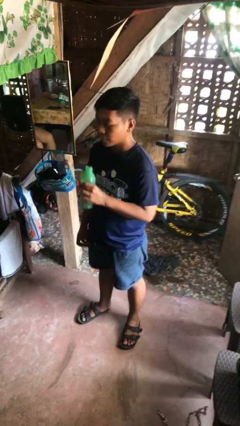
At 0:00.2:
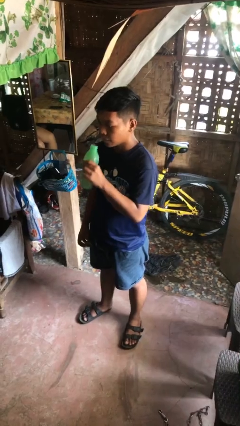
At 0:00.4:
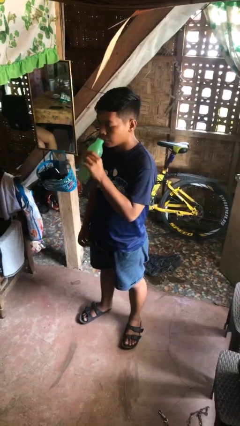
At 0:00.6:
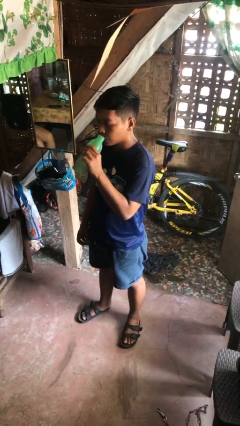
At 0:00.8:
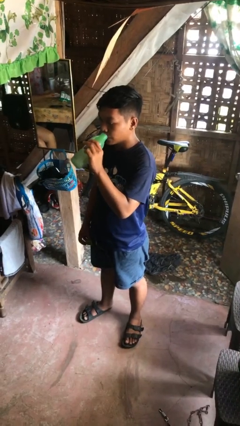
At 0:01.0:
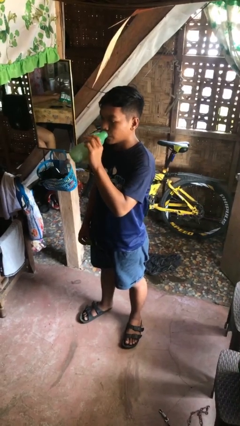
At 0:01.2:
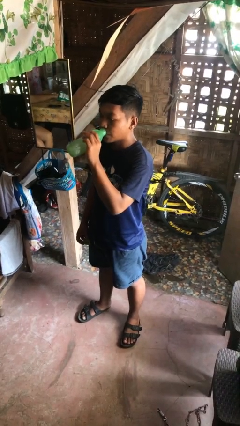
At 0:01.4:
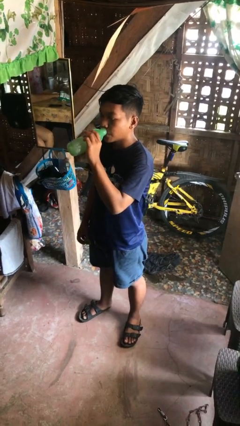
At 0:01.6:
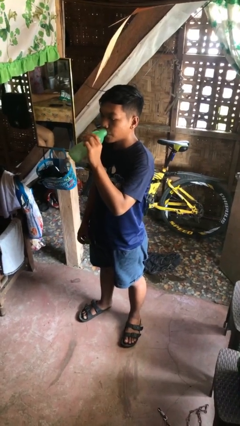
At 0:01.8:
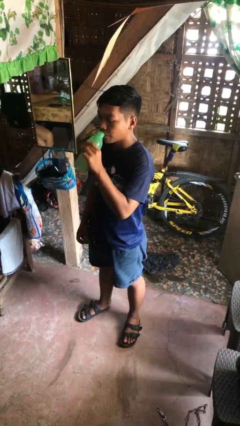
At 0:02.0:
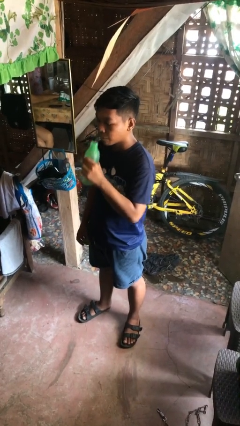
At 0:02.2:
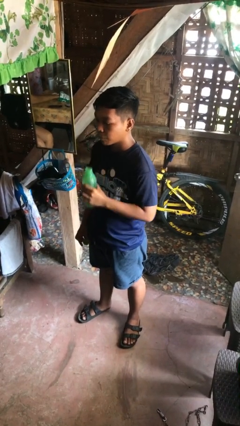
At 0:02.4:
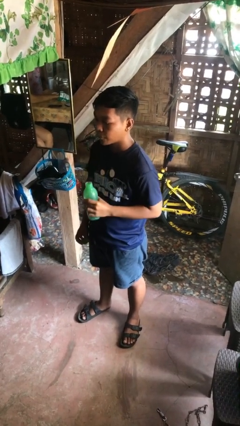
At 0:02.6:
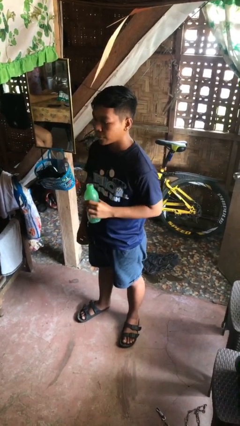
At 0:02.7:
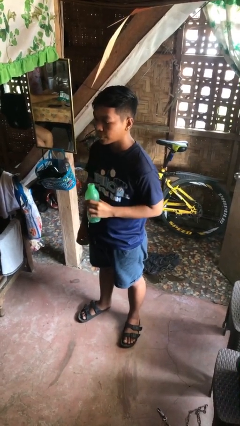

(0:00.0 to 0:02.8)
person drinks from bottle

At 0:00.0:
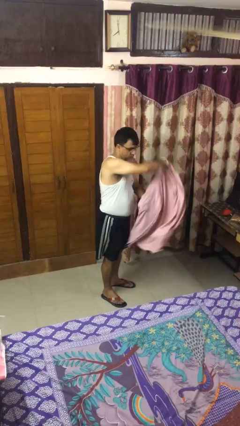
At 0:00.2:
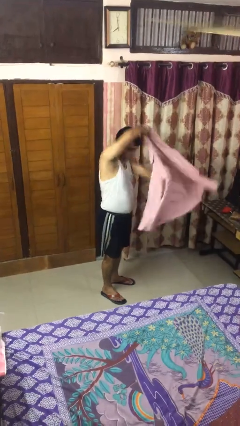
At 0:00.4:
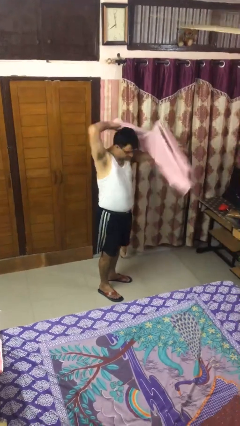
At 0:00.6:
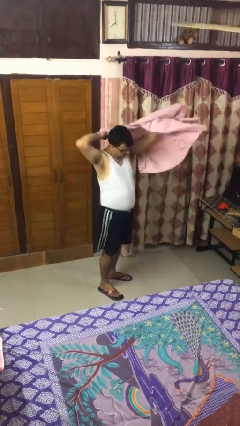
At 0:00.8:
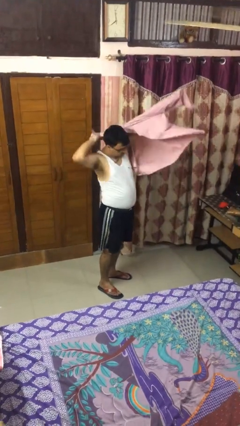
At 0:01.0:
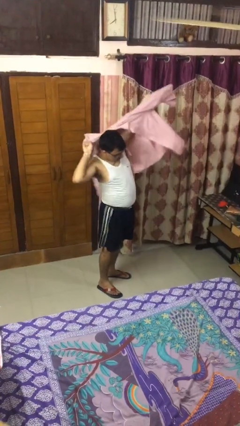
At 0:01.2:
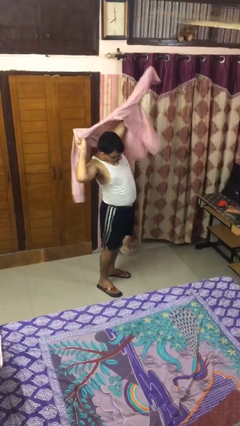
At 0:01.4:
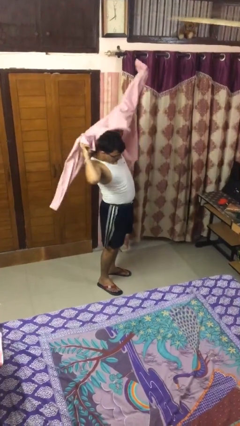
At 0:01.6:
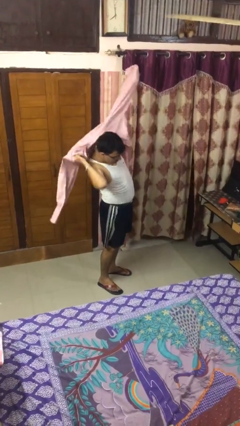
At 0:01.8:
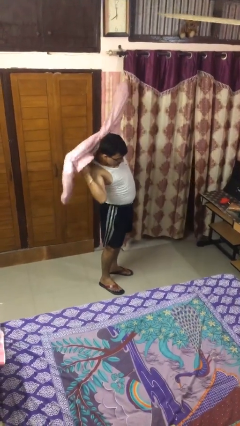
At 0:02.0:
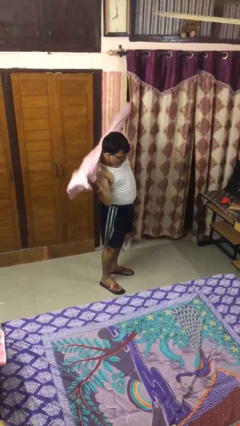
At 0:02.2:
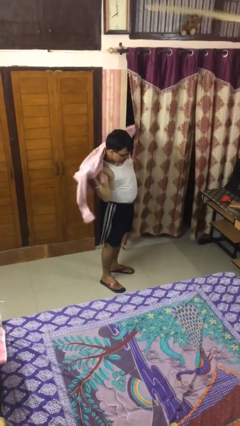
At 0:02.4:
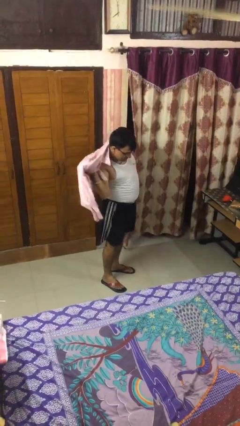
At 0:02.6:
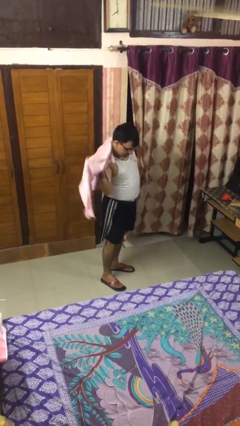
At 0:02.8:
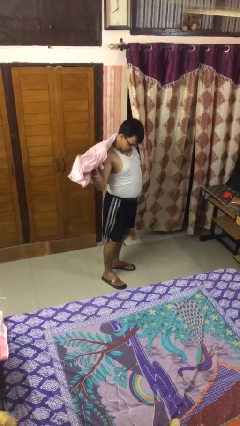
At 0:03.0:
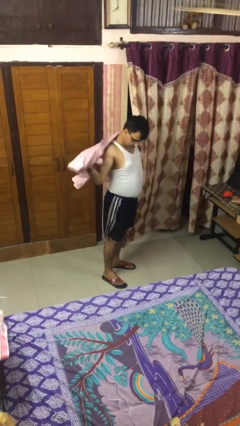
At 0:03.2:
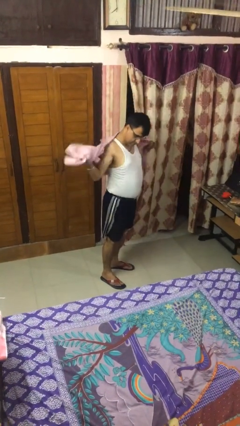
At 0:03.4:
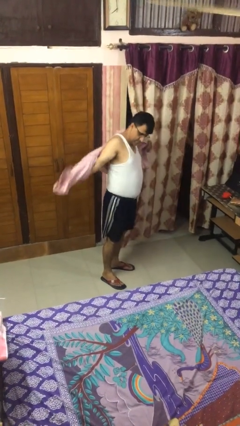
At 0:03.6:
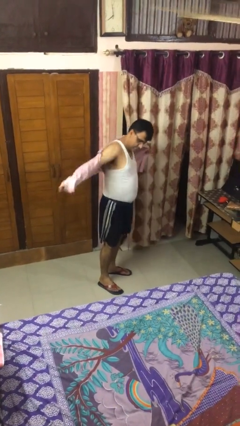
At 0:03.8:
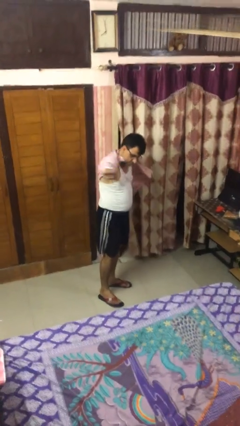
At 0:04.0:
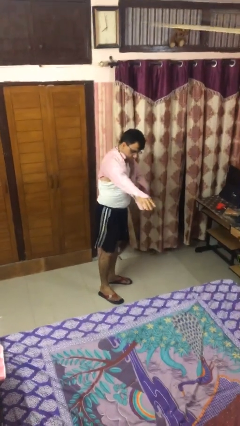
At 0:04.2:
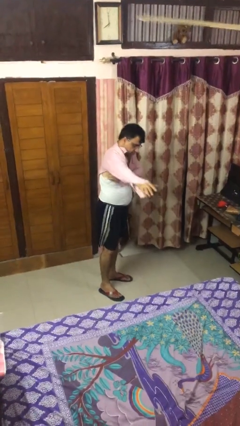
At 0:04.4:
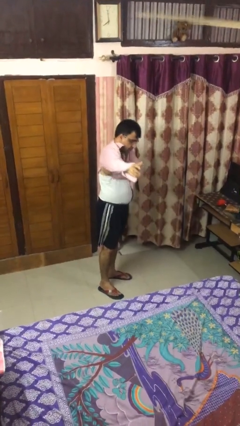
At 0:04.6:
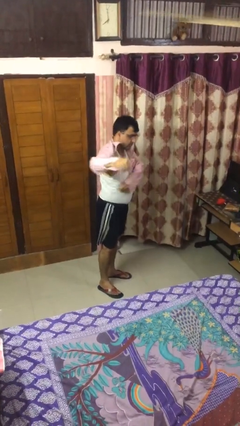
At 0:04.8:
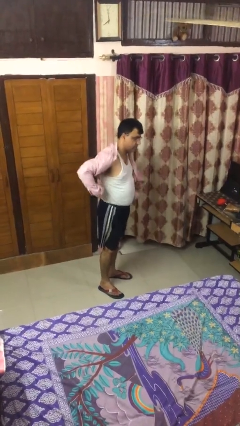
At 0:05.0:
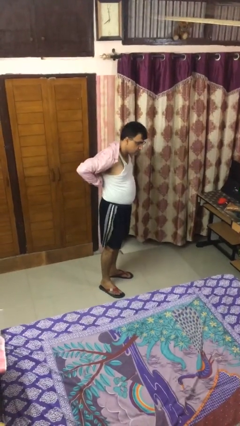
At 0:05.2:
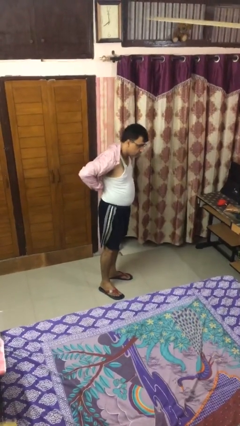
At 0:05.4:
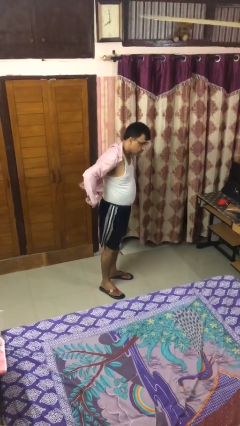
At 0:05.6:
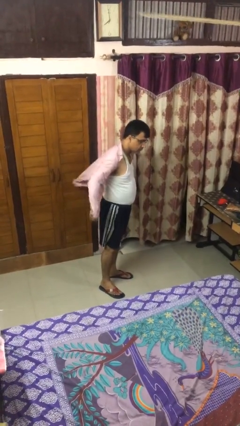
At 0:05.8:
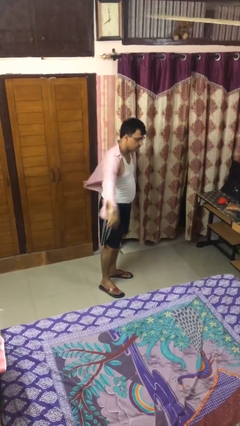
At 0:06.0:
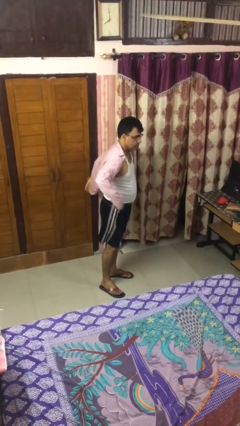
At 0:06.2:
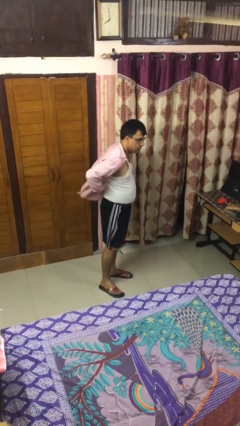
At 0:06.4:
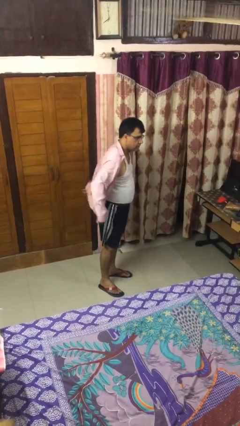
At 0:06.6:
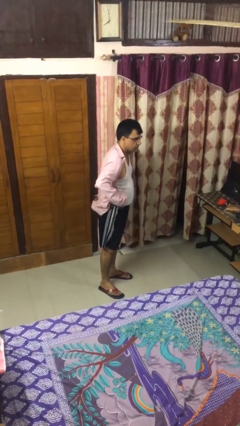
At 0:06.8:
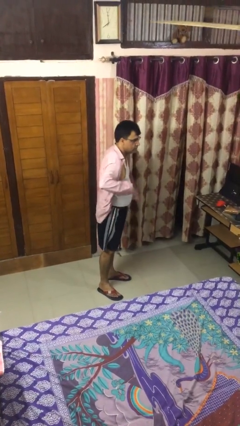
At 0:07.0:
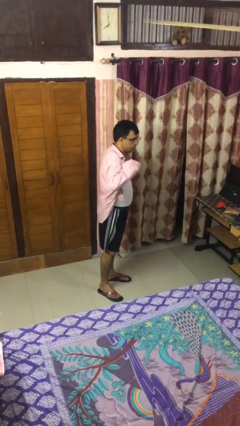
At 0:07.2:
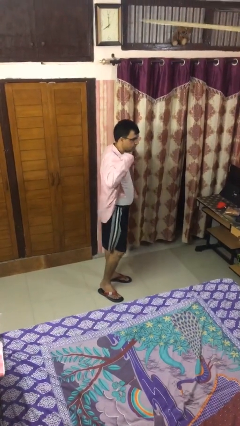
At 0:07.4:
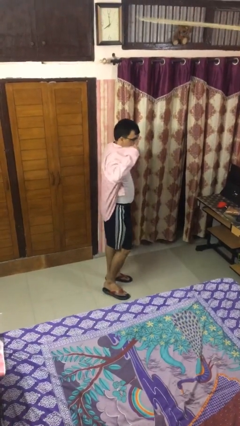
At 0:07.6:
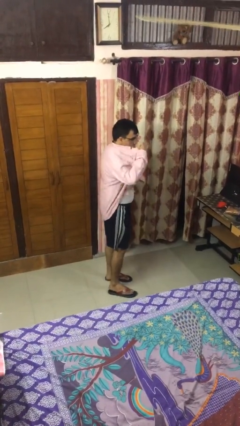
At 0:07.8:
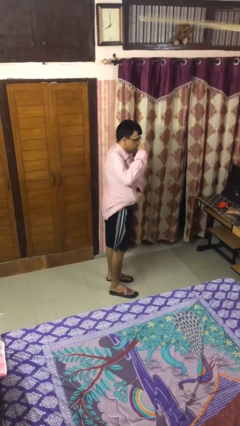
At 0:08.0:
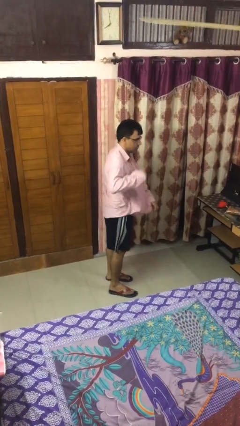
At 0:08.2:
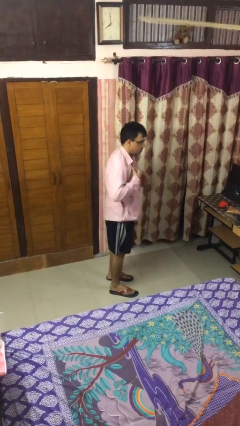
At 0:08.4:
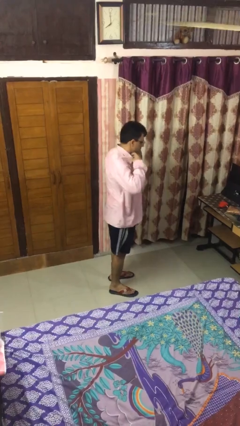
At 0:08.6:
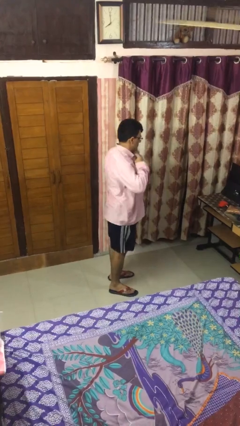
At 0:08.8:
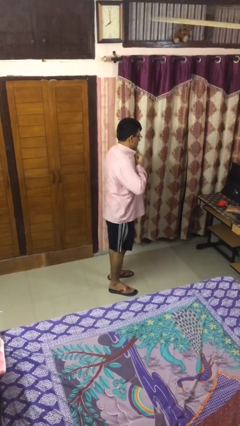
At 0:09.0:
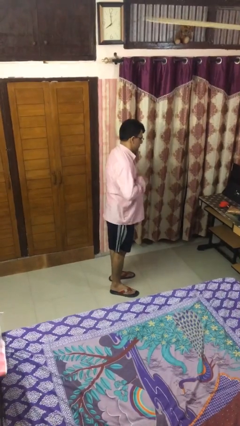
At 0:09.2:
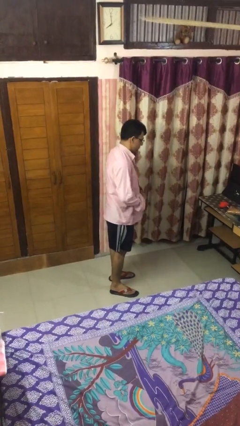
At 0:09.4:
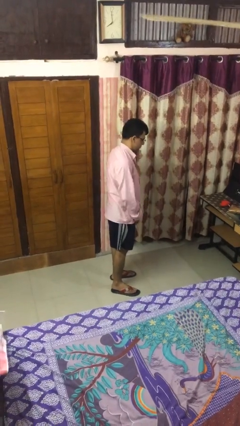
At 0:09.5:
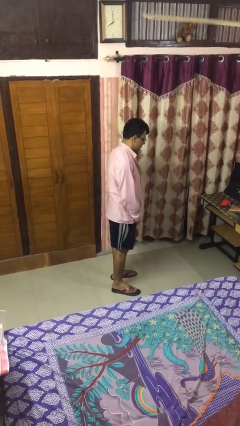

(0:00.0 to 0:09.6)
person puts on shirt

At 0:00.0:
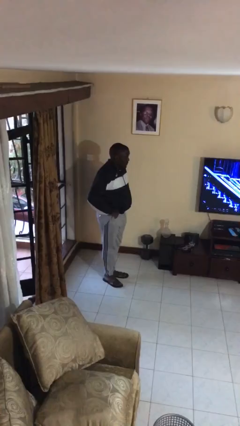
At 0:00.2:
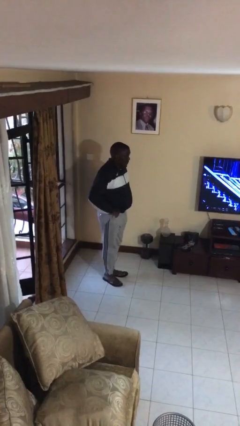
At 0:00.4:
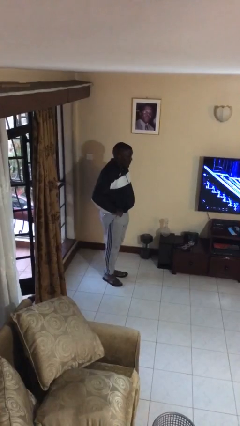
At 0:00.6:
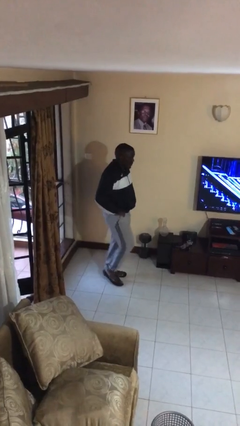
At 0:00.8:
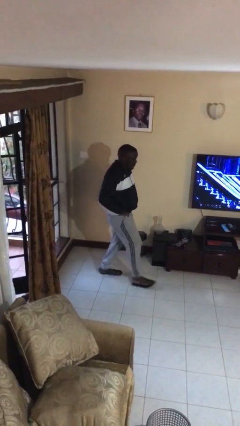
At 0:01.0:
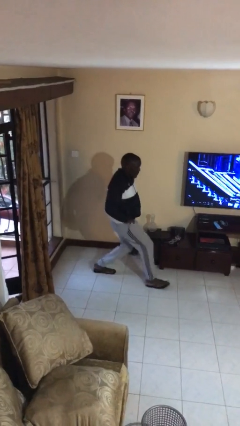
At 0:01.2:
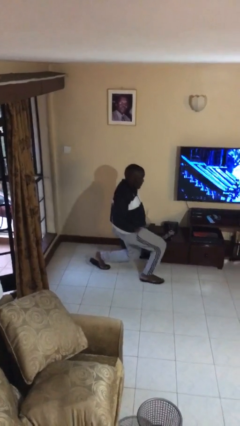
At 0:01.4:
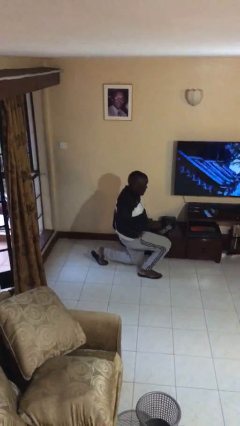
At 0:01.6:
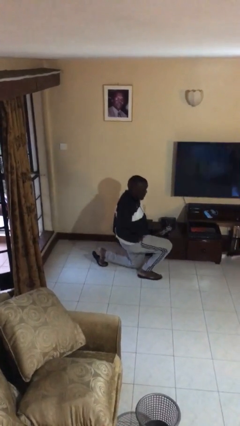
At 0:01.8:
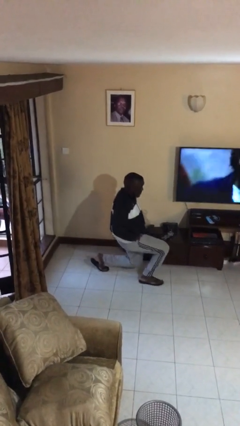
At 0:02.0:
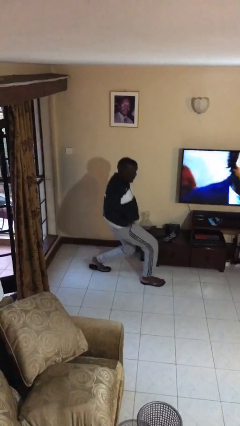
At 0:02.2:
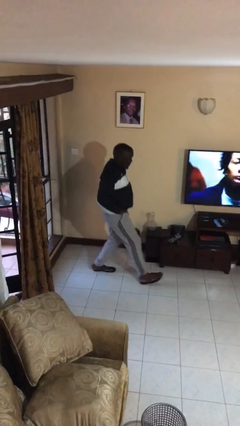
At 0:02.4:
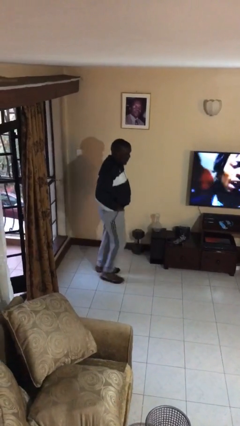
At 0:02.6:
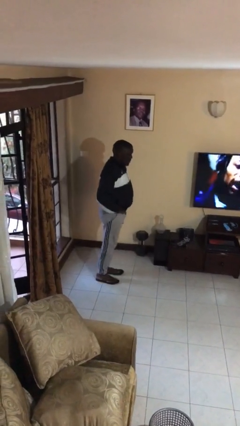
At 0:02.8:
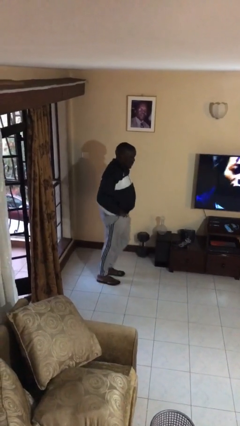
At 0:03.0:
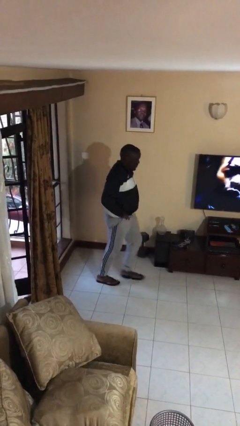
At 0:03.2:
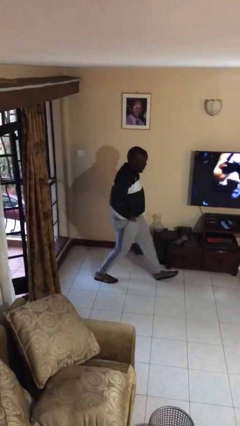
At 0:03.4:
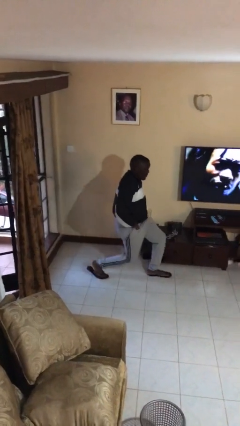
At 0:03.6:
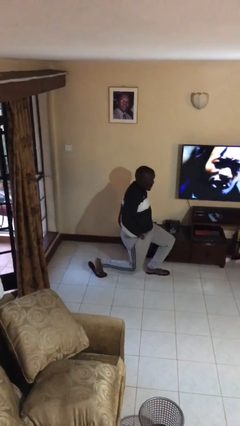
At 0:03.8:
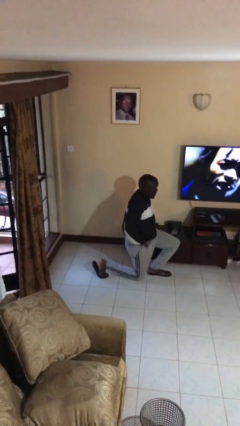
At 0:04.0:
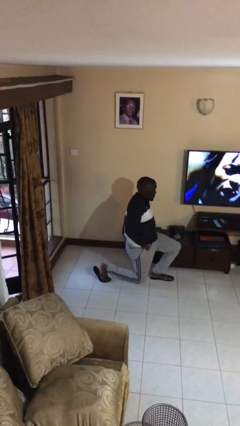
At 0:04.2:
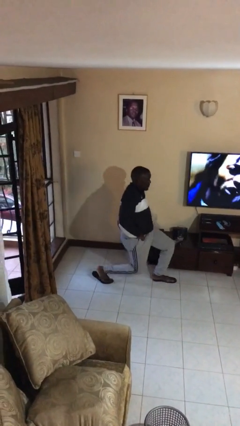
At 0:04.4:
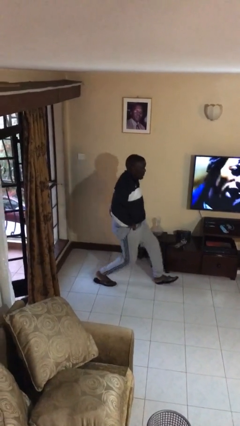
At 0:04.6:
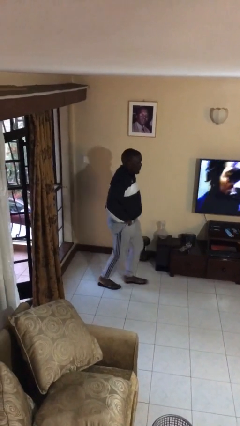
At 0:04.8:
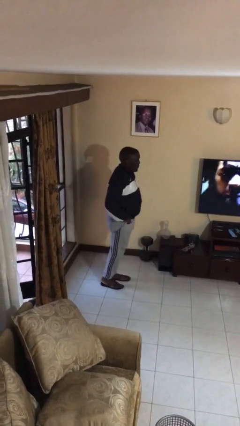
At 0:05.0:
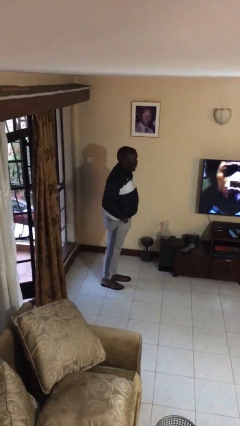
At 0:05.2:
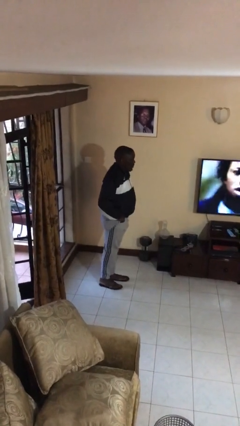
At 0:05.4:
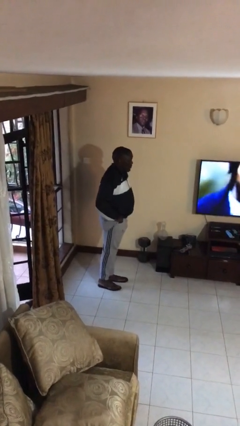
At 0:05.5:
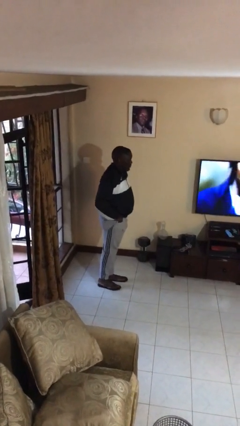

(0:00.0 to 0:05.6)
person exercises with lunges
